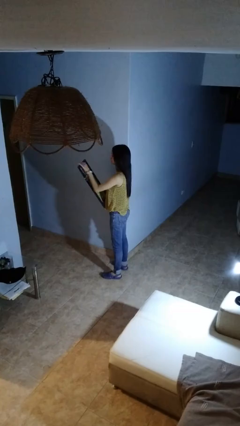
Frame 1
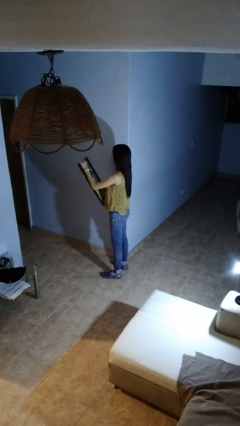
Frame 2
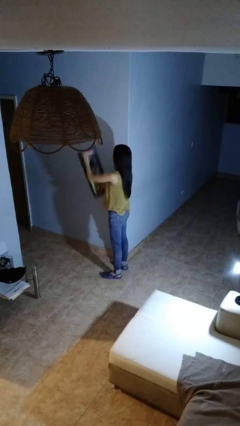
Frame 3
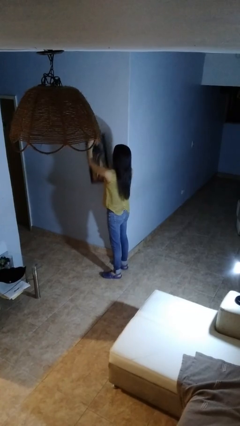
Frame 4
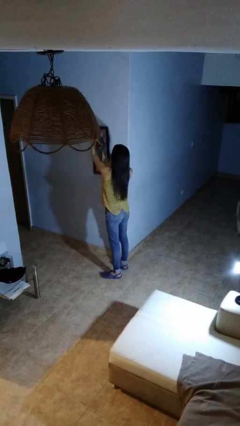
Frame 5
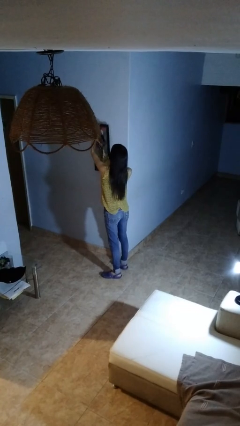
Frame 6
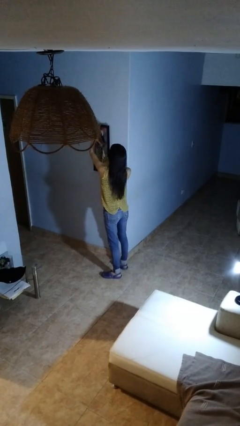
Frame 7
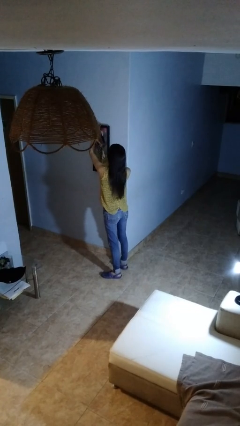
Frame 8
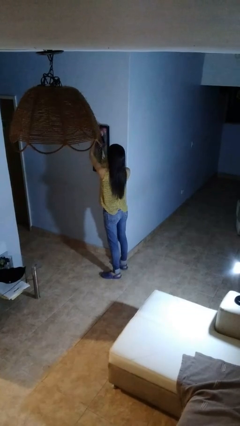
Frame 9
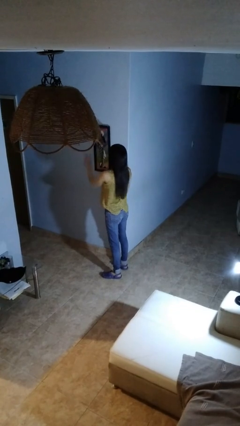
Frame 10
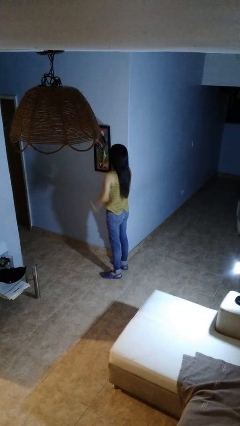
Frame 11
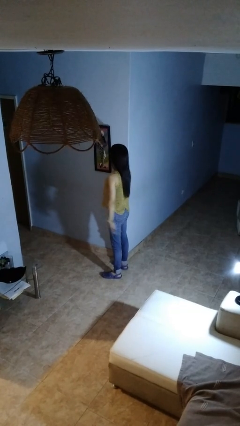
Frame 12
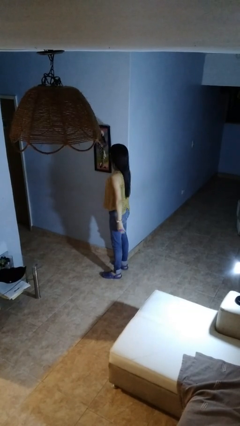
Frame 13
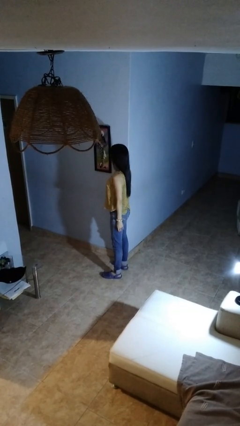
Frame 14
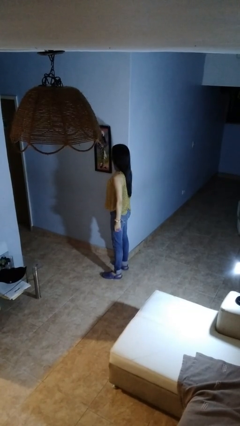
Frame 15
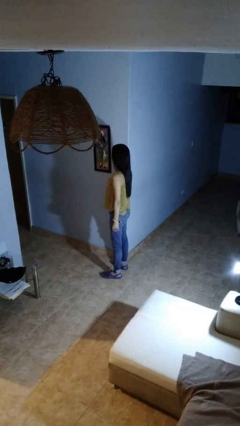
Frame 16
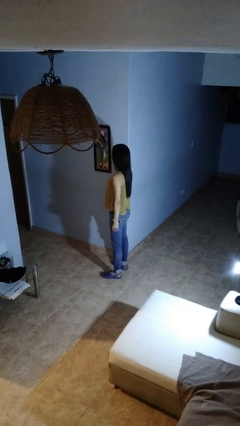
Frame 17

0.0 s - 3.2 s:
person puts up picture frame

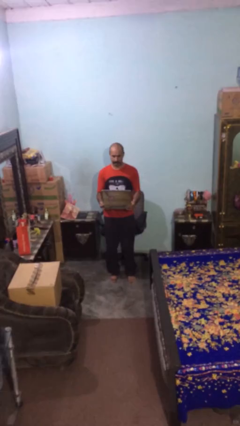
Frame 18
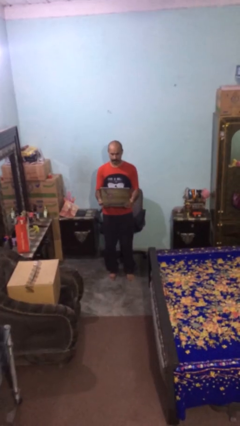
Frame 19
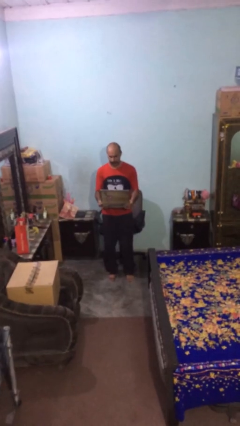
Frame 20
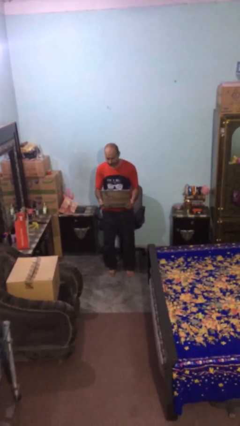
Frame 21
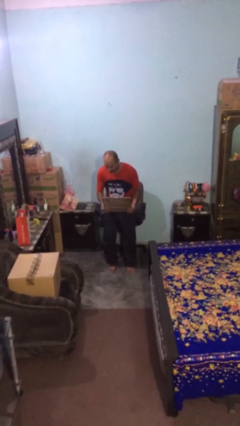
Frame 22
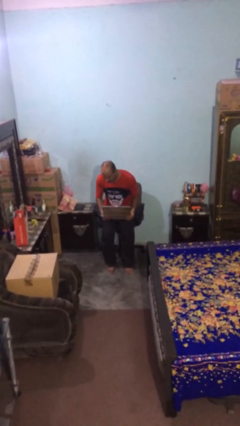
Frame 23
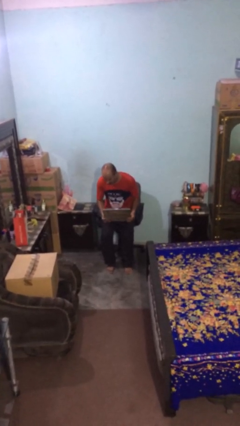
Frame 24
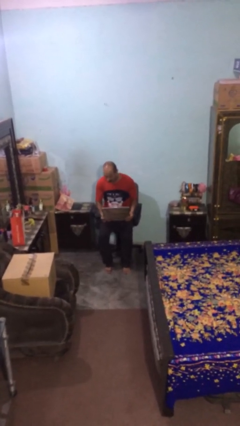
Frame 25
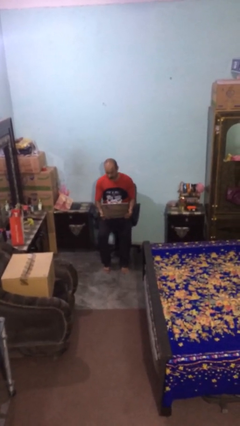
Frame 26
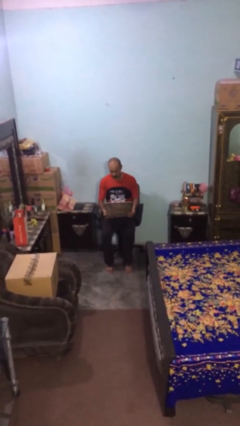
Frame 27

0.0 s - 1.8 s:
person sits down

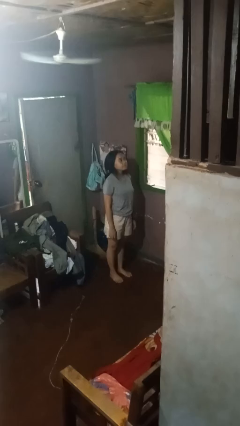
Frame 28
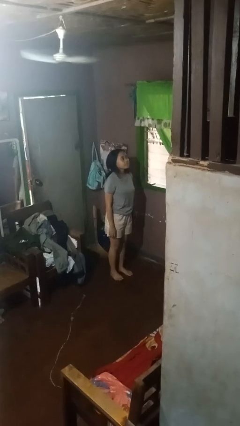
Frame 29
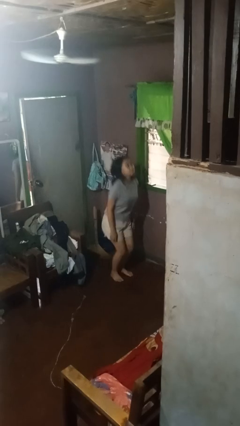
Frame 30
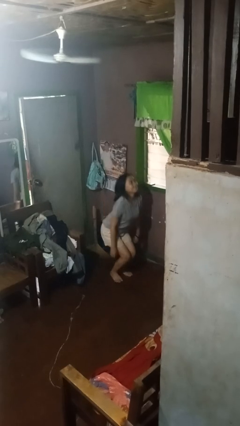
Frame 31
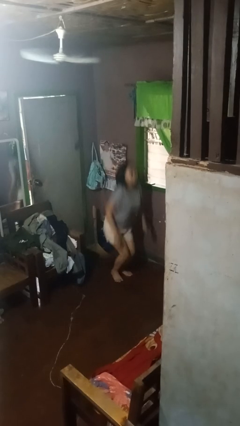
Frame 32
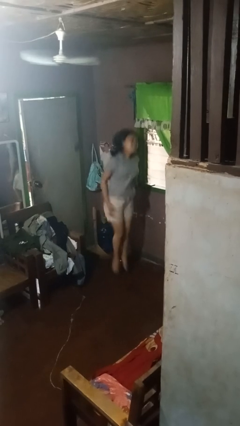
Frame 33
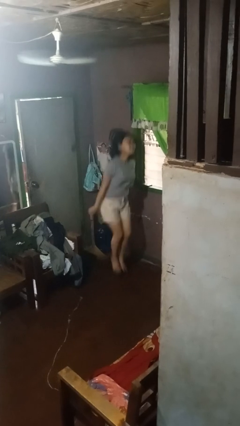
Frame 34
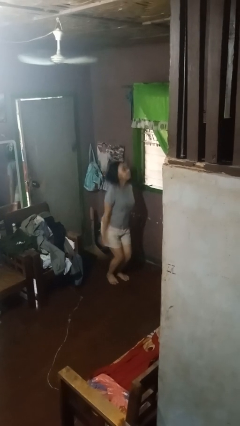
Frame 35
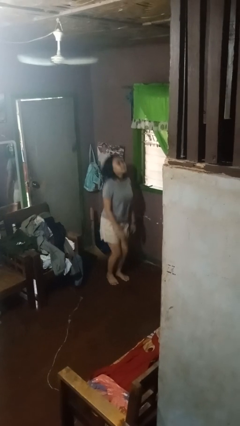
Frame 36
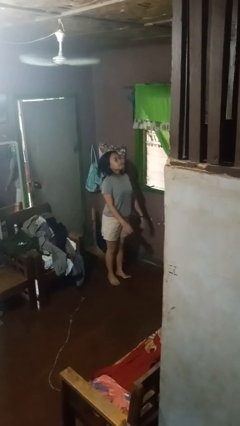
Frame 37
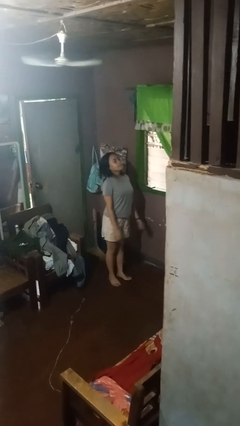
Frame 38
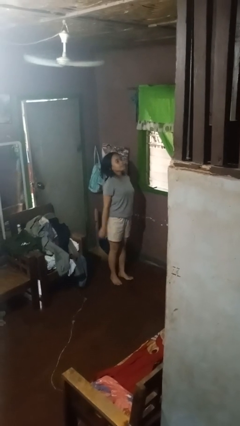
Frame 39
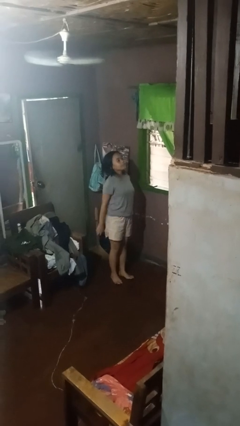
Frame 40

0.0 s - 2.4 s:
person jumps

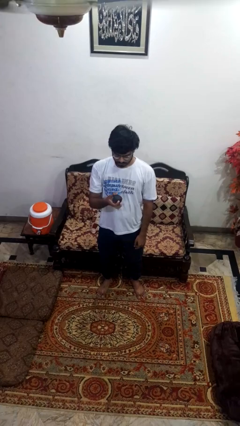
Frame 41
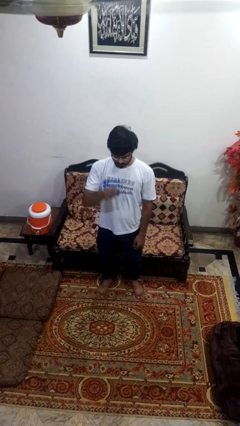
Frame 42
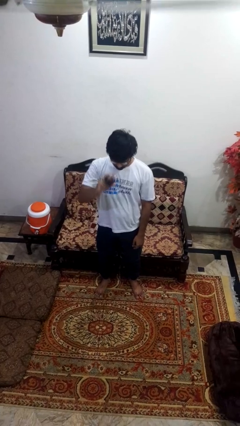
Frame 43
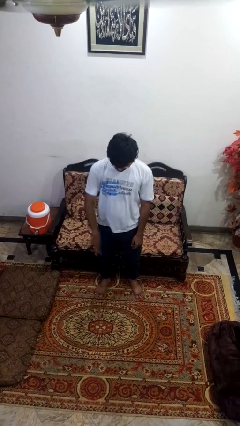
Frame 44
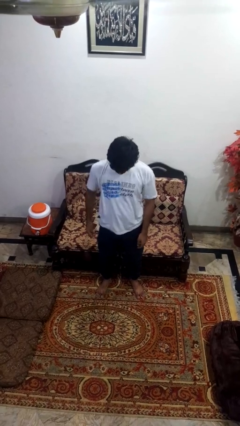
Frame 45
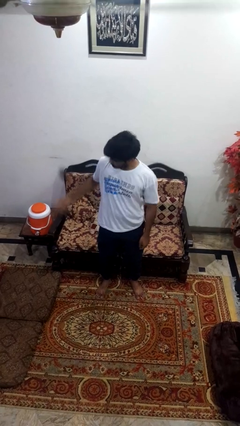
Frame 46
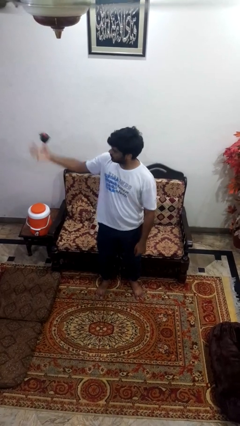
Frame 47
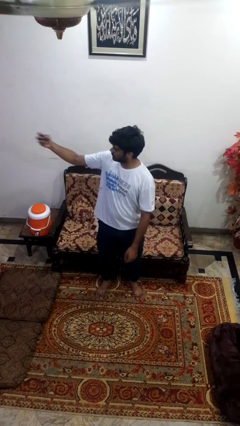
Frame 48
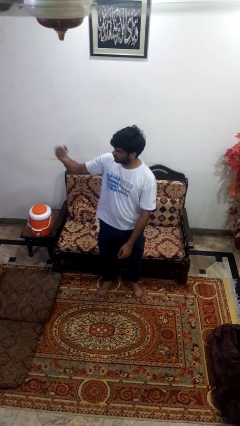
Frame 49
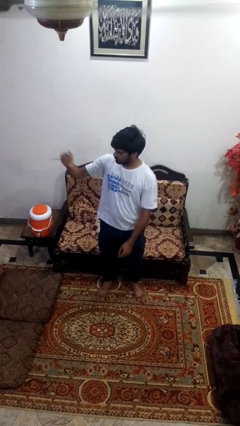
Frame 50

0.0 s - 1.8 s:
person bounces ball on floor

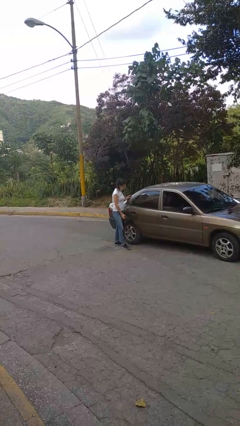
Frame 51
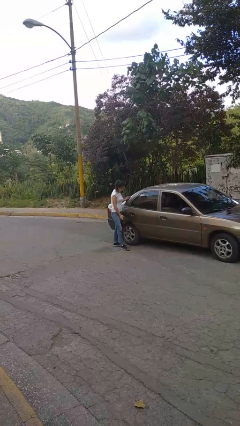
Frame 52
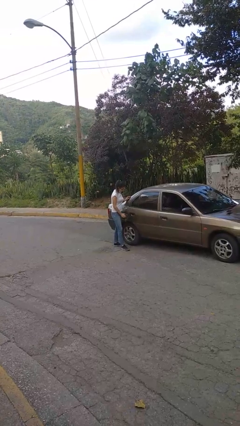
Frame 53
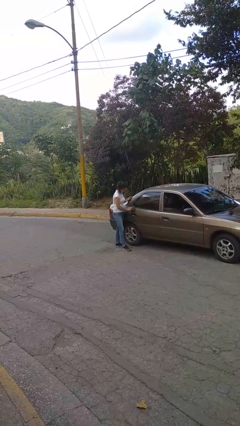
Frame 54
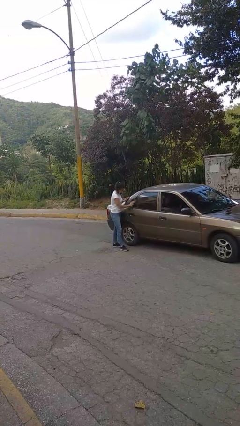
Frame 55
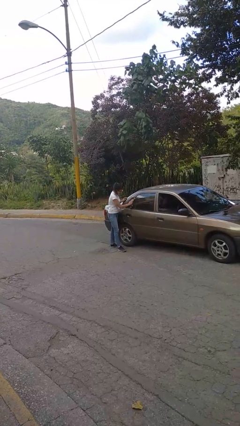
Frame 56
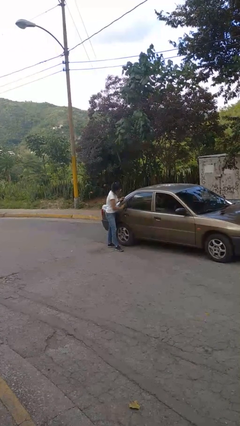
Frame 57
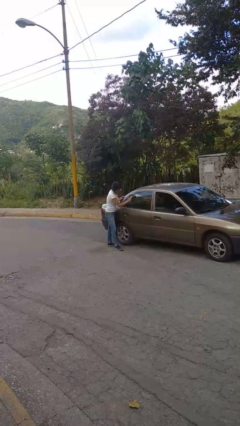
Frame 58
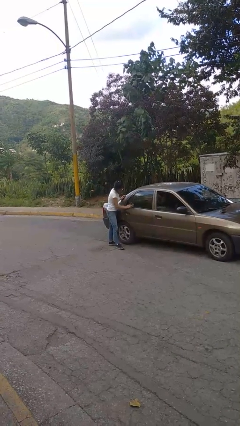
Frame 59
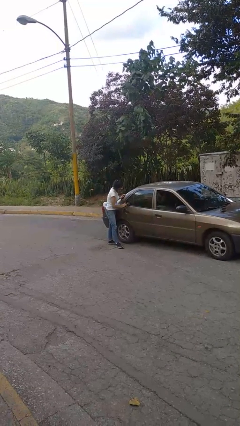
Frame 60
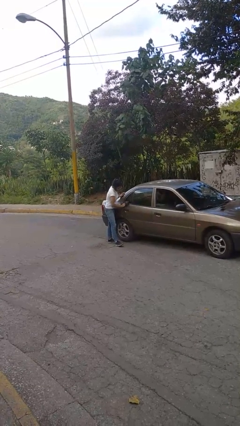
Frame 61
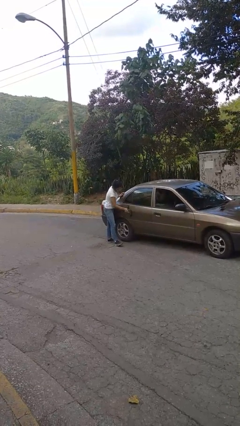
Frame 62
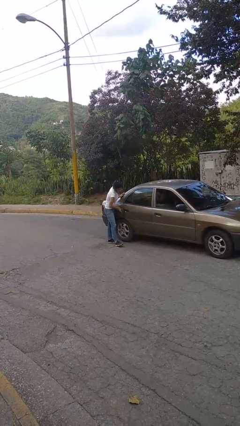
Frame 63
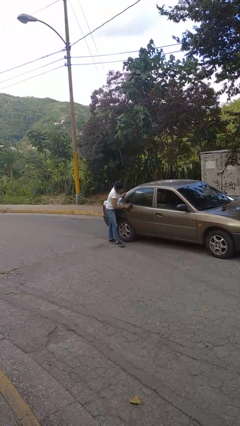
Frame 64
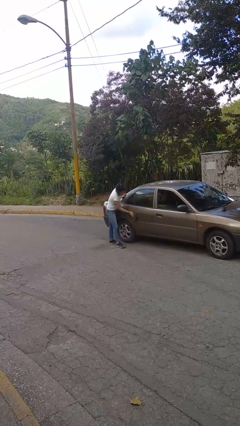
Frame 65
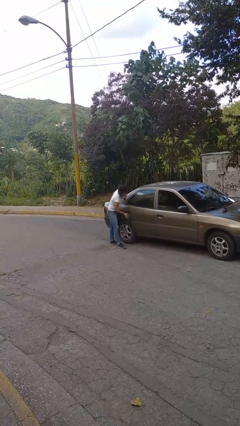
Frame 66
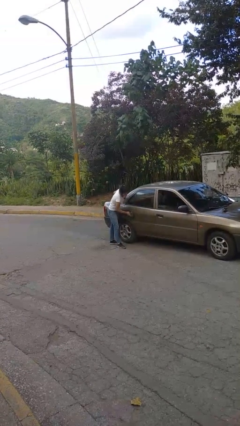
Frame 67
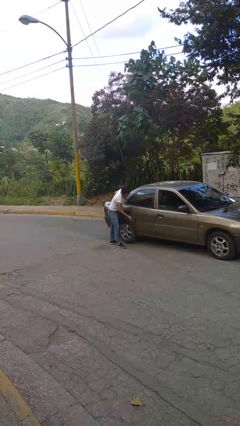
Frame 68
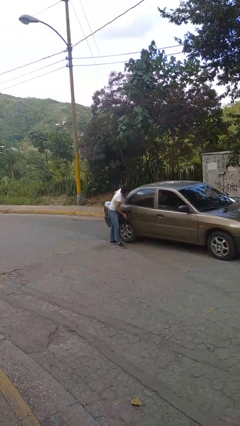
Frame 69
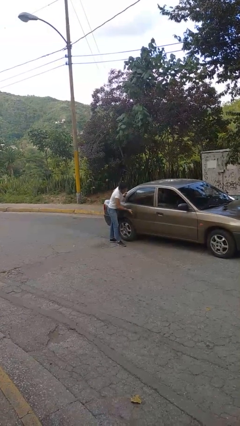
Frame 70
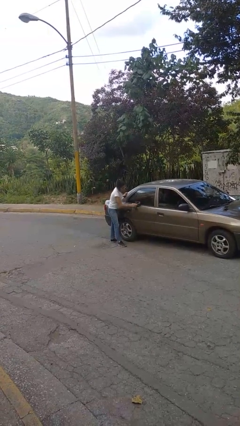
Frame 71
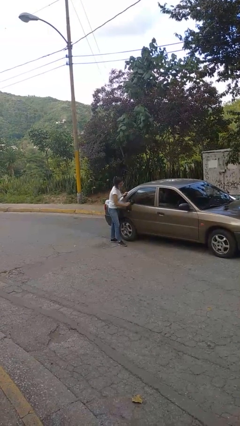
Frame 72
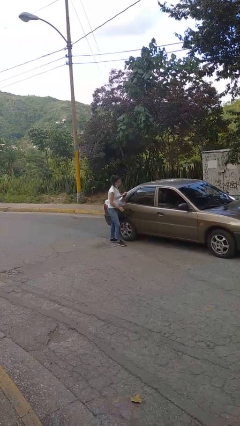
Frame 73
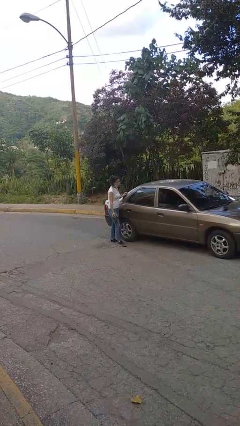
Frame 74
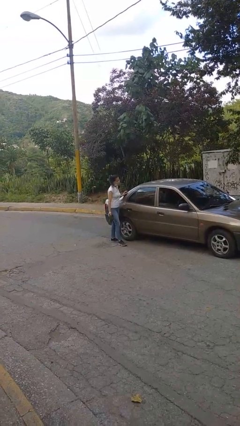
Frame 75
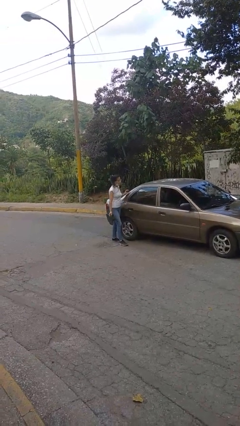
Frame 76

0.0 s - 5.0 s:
person polishes car with rag

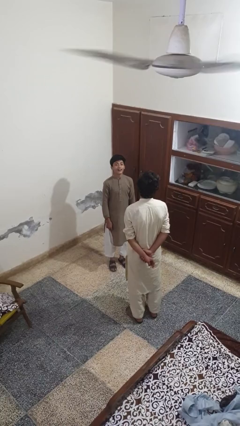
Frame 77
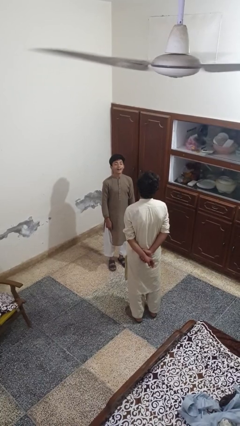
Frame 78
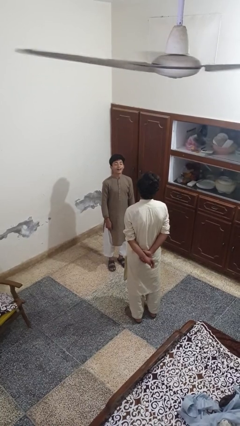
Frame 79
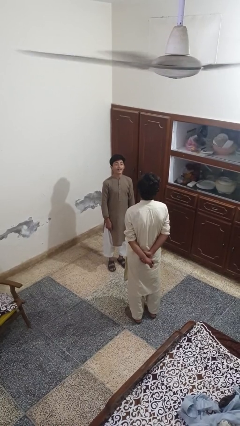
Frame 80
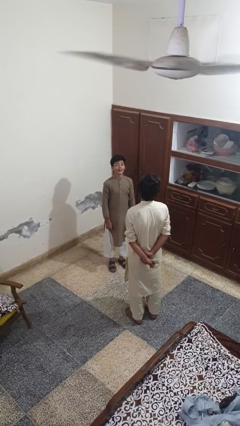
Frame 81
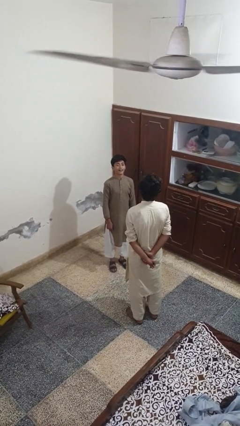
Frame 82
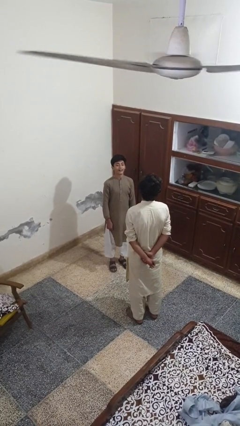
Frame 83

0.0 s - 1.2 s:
person laughs with person

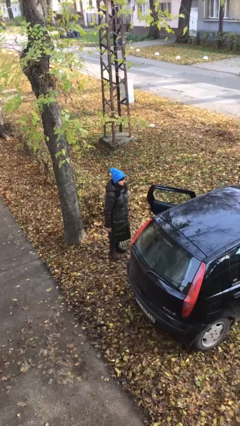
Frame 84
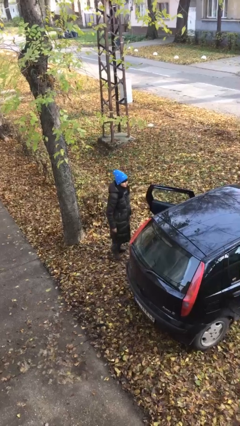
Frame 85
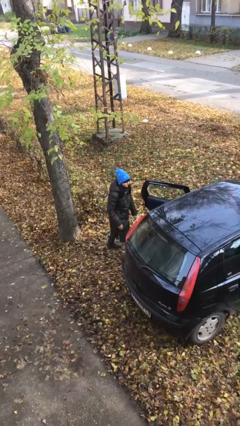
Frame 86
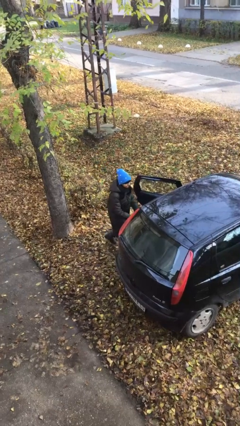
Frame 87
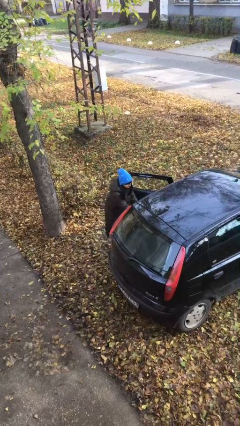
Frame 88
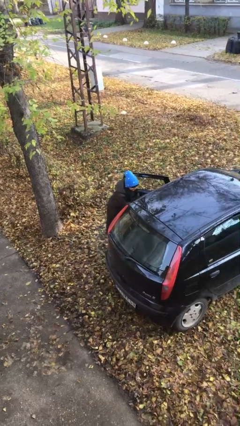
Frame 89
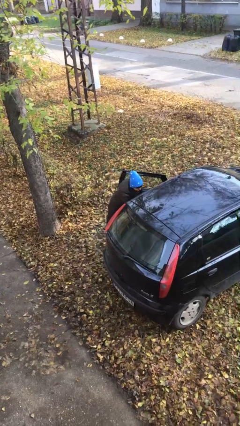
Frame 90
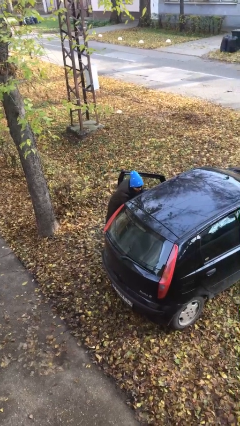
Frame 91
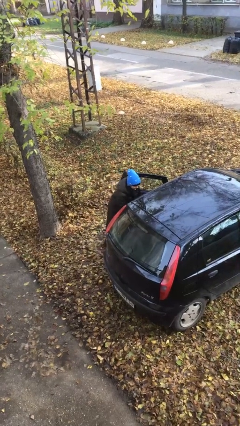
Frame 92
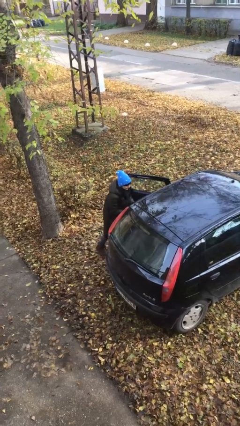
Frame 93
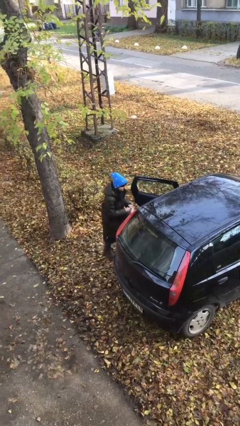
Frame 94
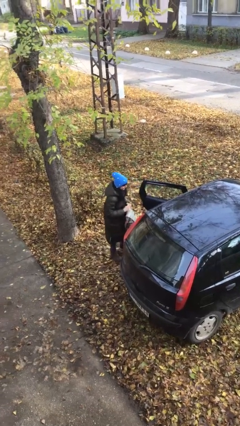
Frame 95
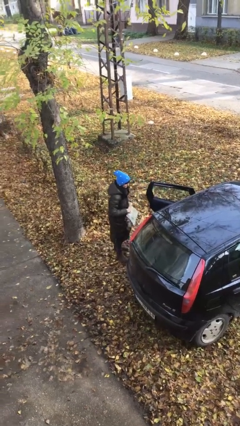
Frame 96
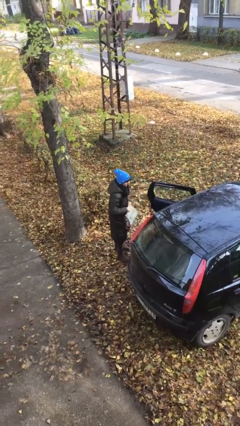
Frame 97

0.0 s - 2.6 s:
person unloads car
